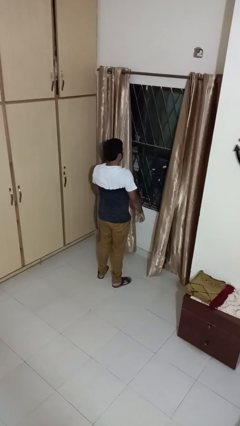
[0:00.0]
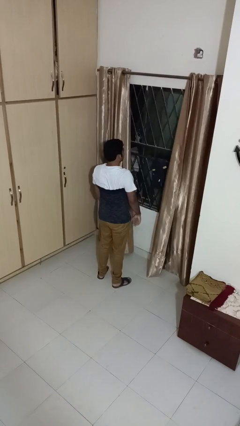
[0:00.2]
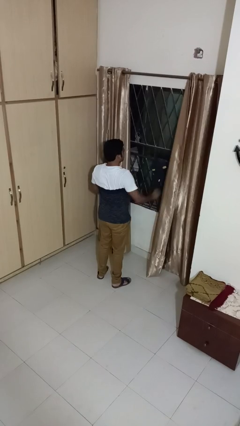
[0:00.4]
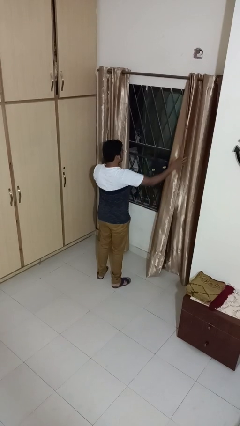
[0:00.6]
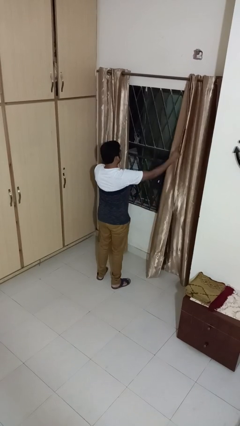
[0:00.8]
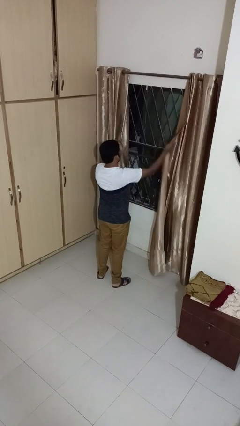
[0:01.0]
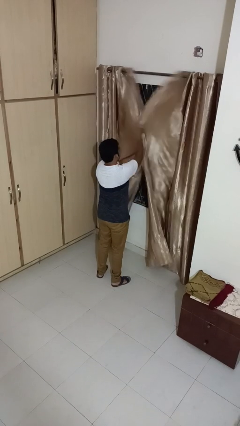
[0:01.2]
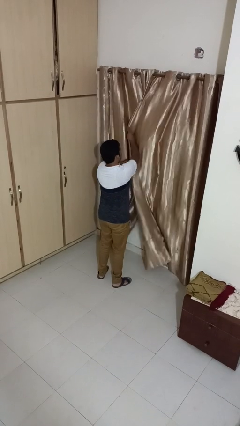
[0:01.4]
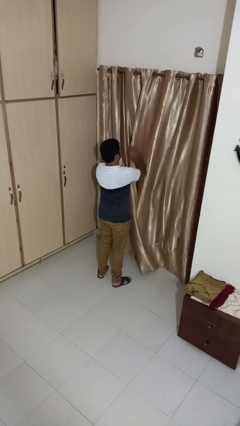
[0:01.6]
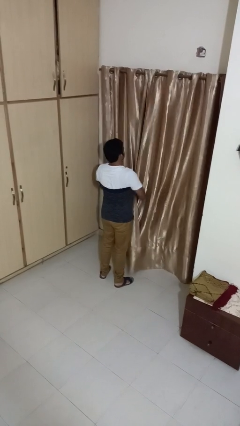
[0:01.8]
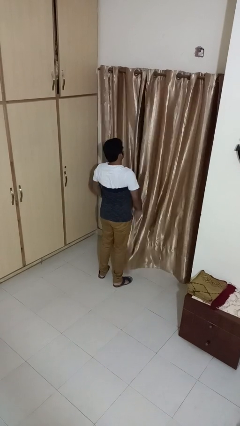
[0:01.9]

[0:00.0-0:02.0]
person closes curtains

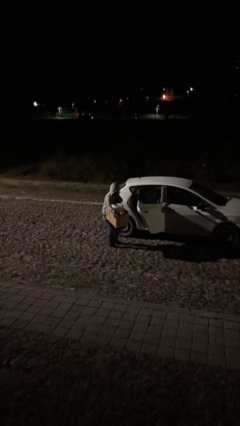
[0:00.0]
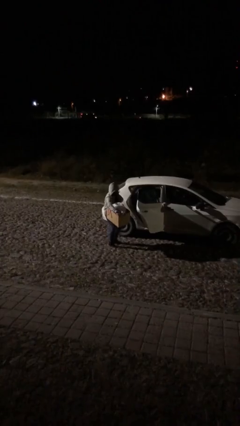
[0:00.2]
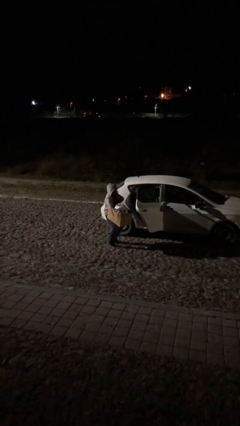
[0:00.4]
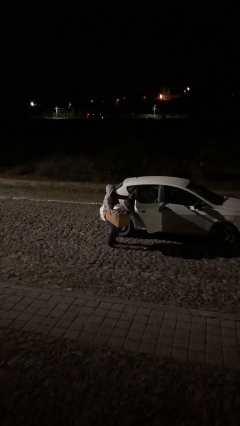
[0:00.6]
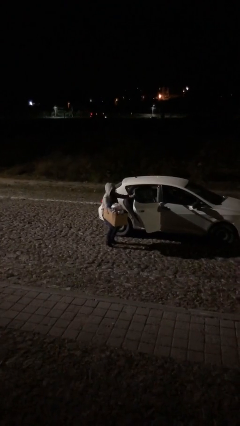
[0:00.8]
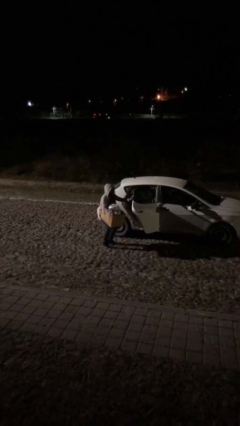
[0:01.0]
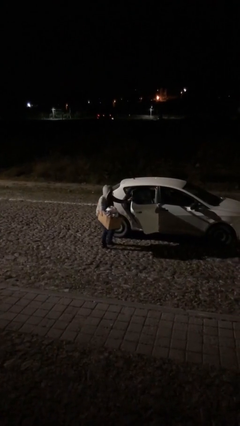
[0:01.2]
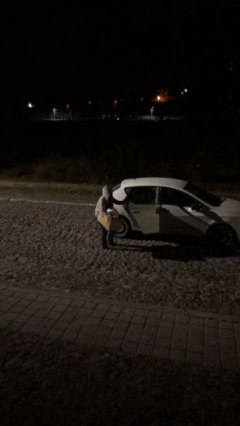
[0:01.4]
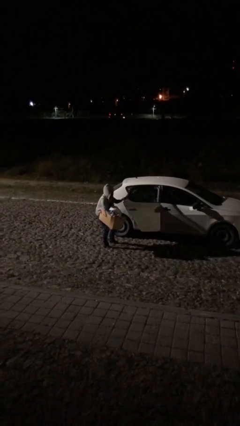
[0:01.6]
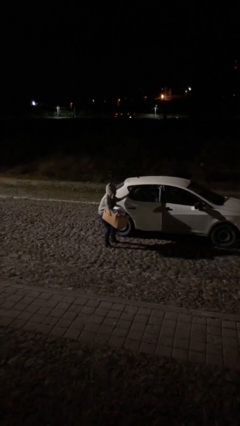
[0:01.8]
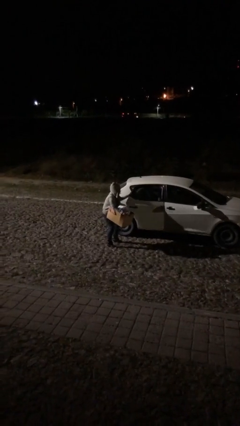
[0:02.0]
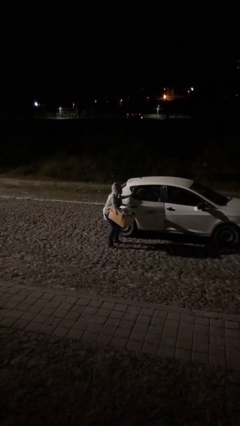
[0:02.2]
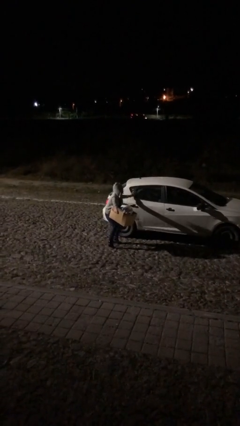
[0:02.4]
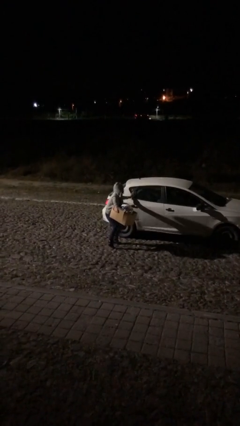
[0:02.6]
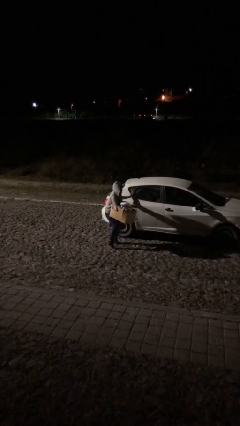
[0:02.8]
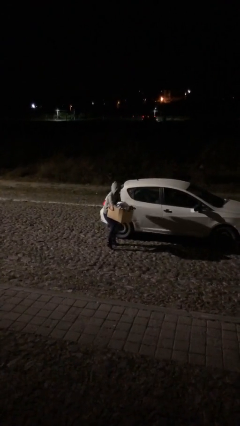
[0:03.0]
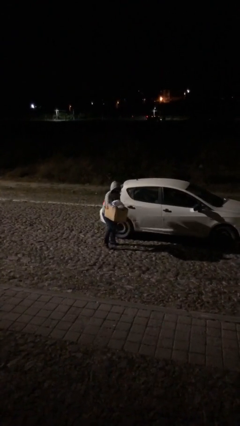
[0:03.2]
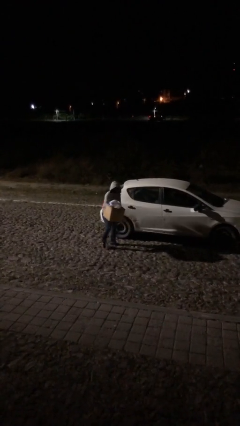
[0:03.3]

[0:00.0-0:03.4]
person closes car door

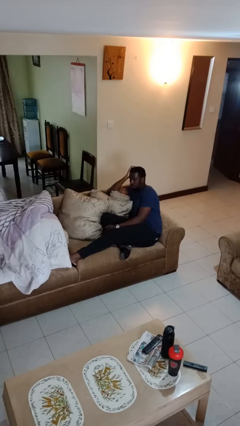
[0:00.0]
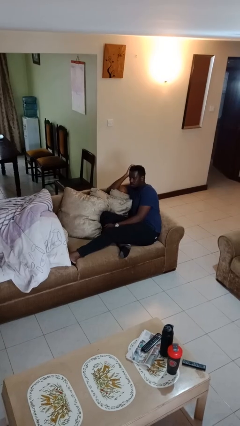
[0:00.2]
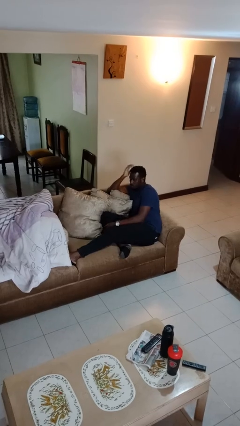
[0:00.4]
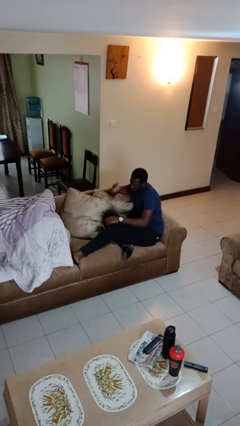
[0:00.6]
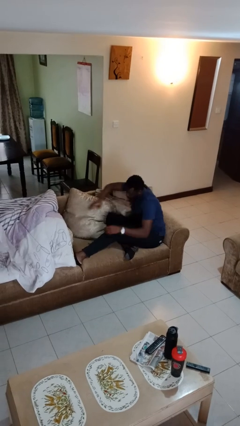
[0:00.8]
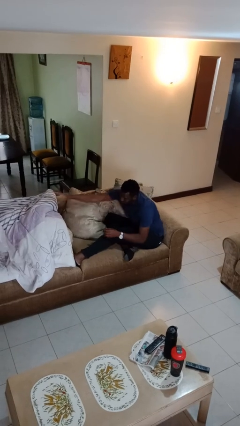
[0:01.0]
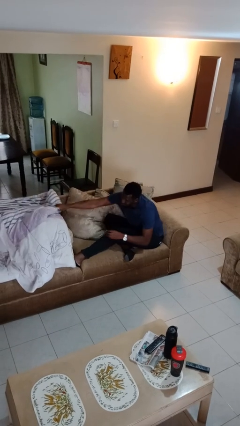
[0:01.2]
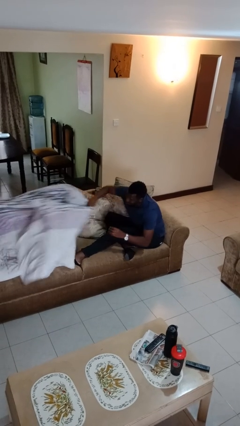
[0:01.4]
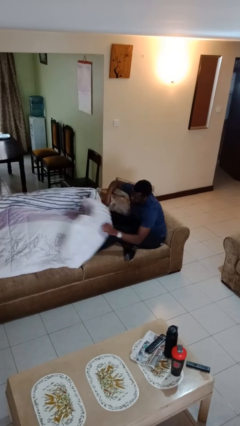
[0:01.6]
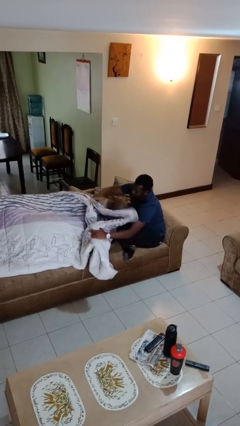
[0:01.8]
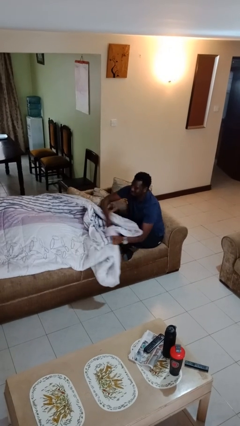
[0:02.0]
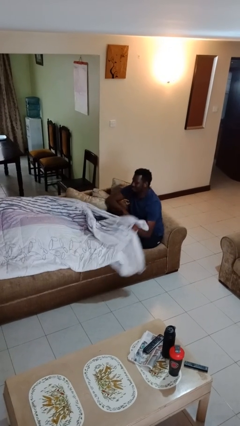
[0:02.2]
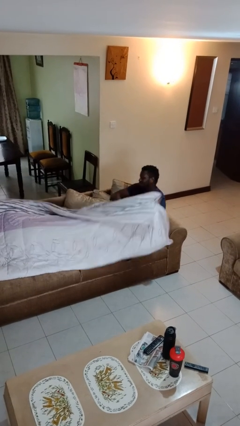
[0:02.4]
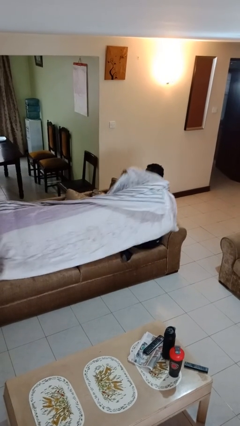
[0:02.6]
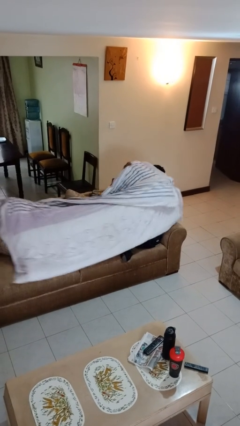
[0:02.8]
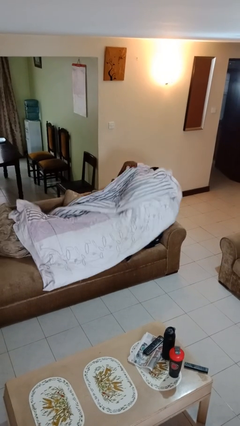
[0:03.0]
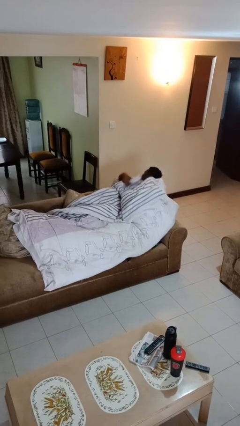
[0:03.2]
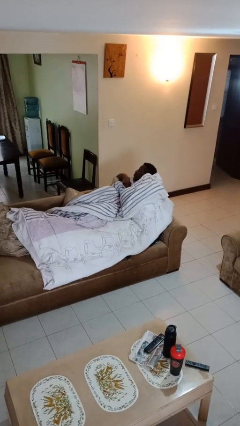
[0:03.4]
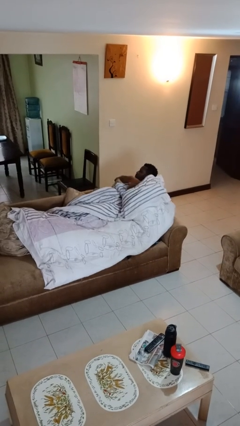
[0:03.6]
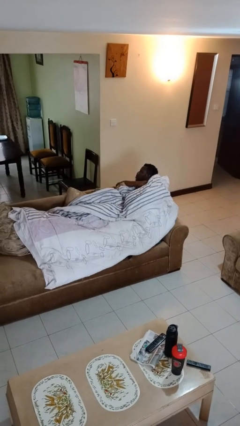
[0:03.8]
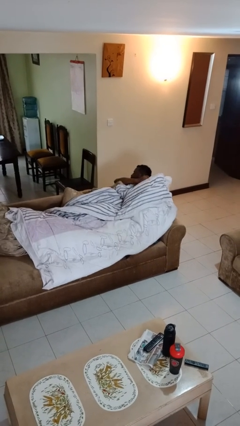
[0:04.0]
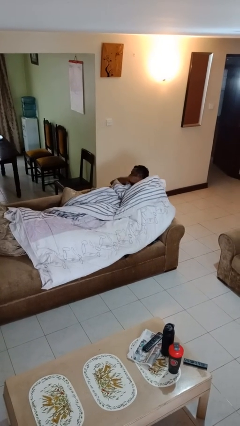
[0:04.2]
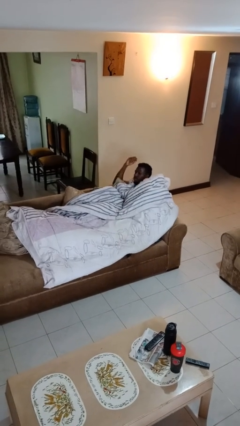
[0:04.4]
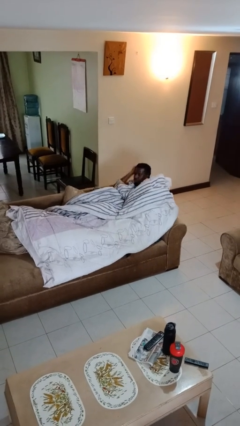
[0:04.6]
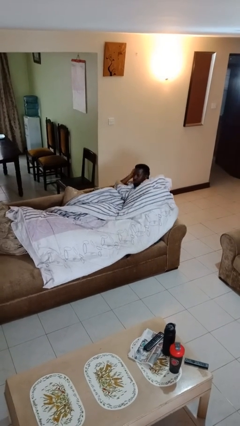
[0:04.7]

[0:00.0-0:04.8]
person covers with blanket

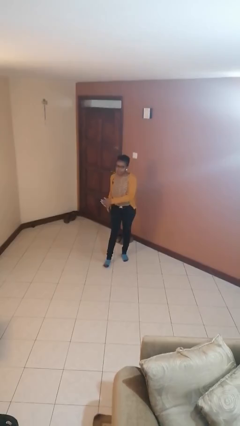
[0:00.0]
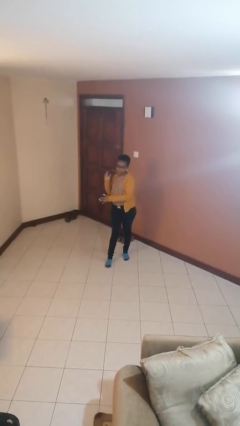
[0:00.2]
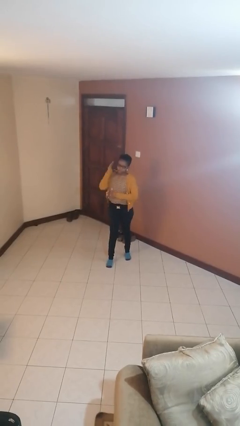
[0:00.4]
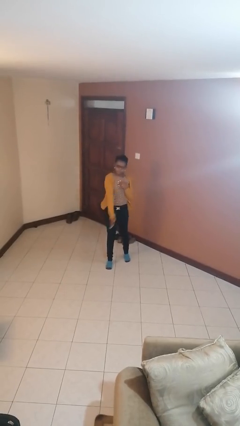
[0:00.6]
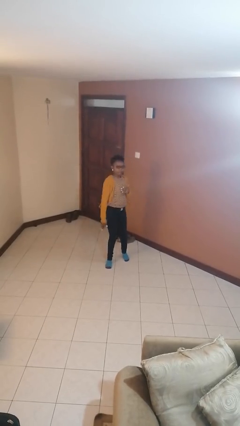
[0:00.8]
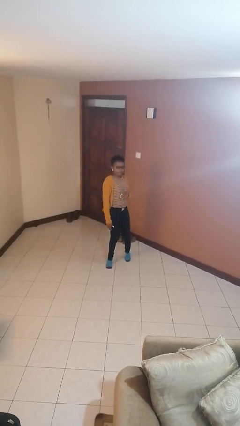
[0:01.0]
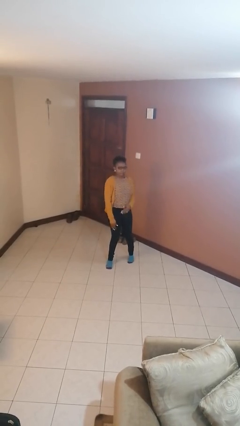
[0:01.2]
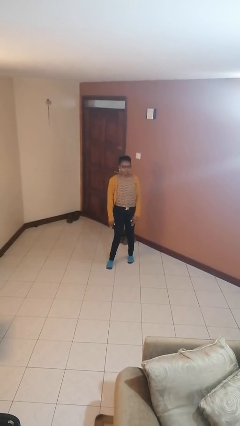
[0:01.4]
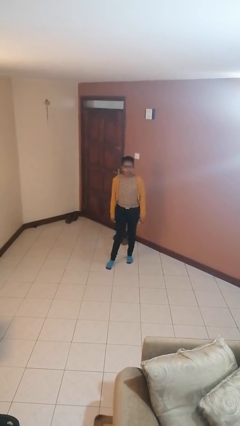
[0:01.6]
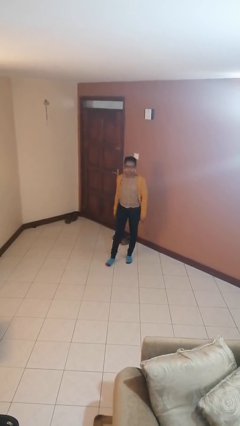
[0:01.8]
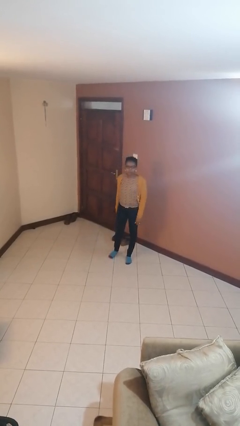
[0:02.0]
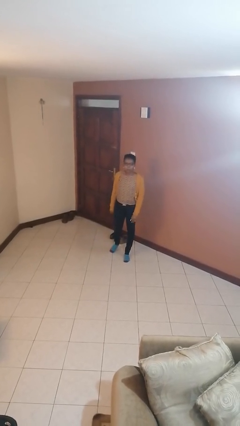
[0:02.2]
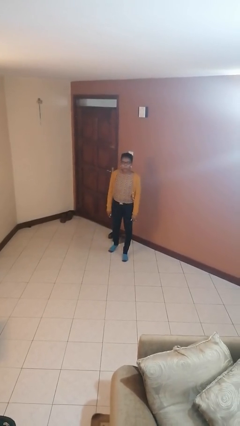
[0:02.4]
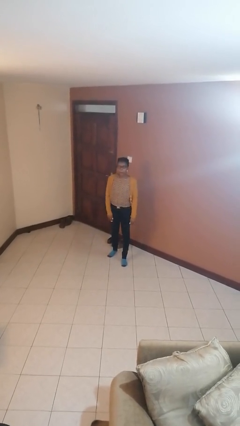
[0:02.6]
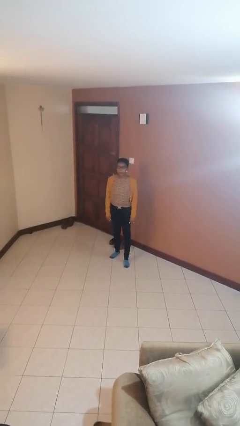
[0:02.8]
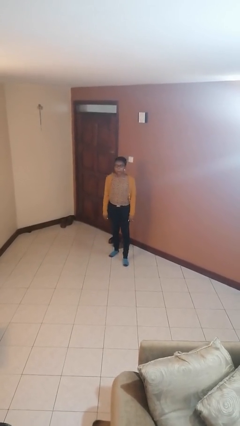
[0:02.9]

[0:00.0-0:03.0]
person karate chop

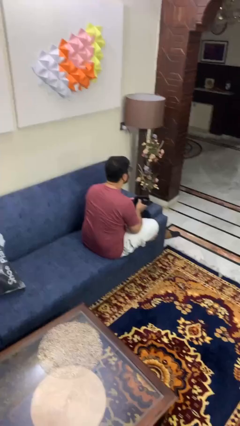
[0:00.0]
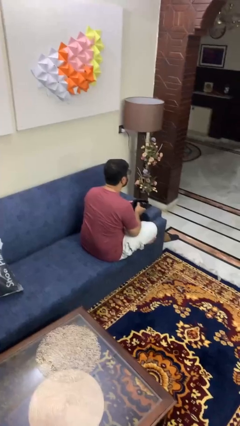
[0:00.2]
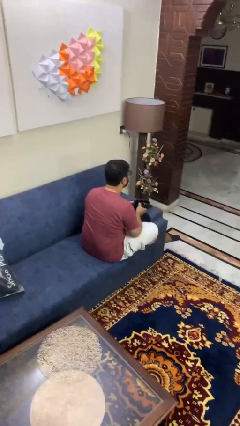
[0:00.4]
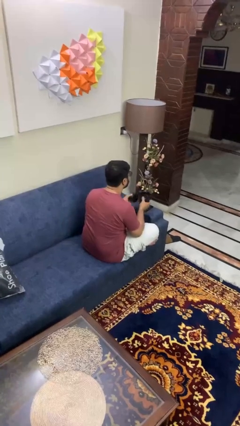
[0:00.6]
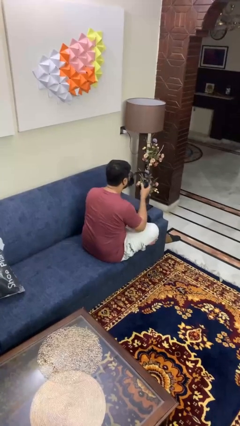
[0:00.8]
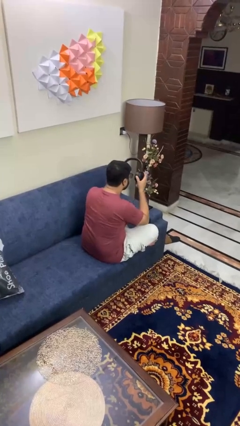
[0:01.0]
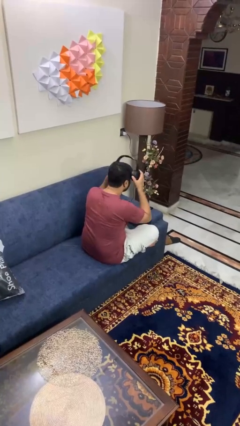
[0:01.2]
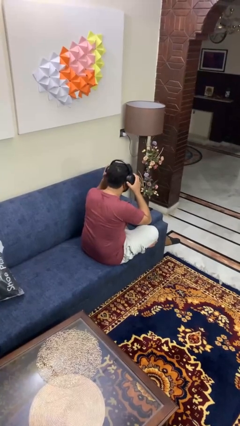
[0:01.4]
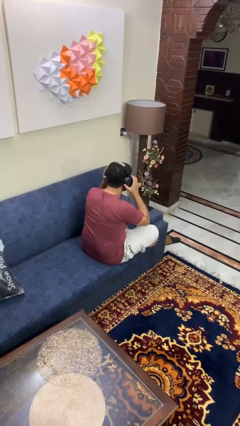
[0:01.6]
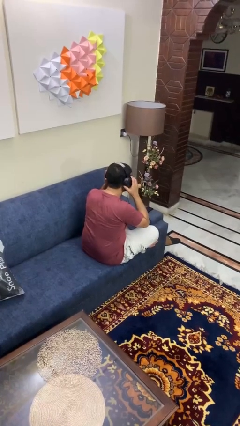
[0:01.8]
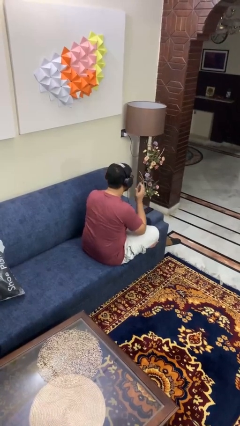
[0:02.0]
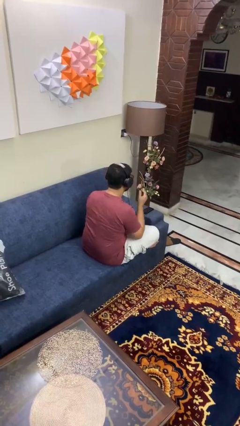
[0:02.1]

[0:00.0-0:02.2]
person puts on headphones

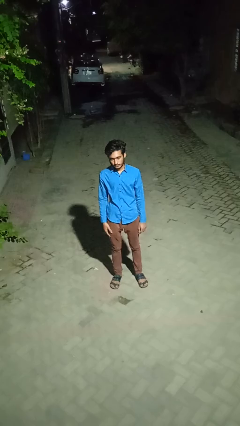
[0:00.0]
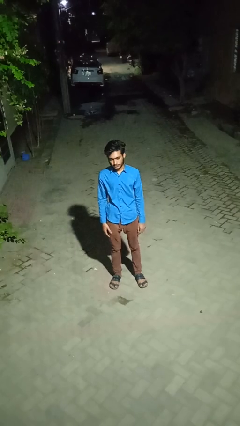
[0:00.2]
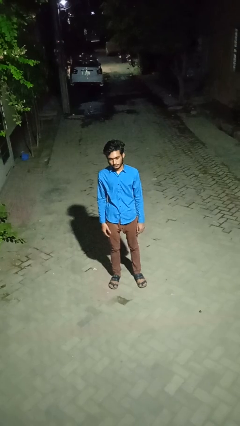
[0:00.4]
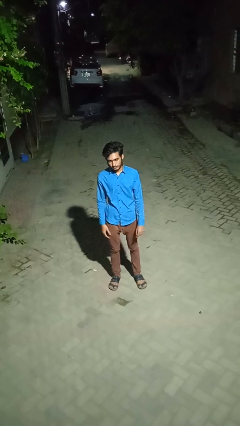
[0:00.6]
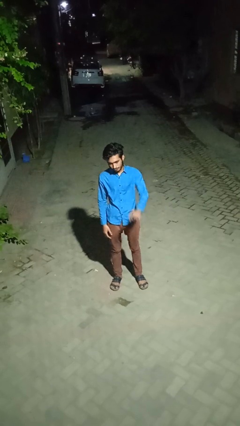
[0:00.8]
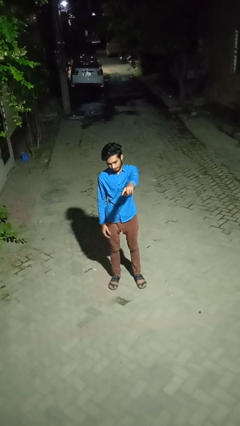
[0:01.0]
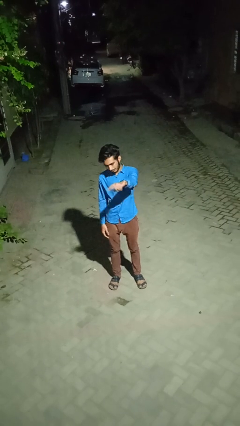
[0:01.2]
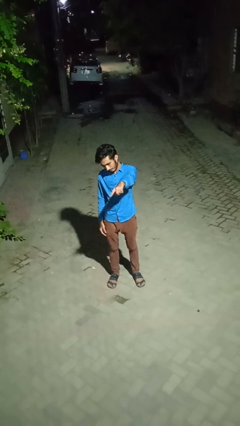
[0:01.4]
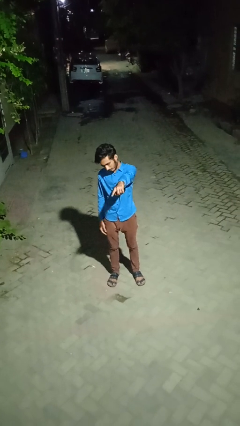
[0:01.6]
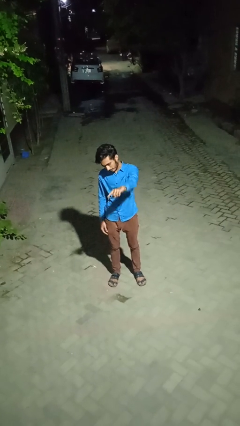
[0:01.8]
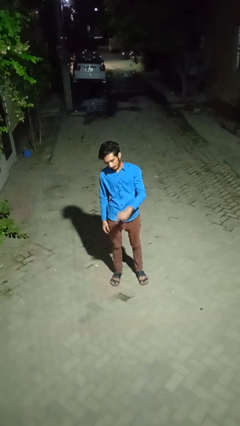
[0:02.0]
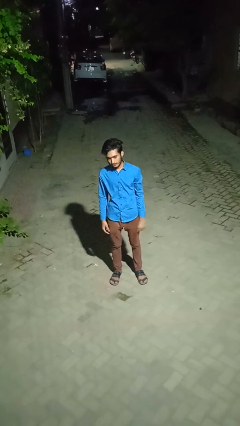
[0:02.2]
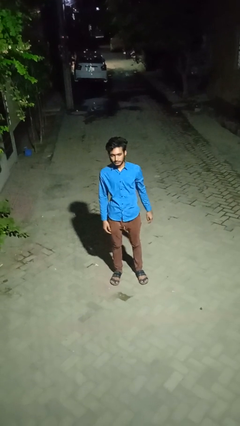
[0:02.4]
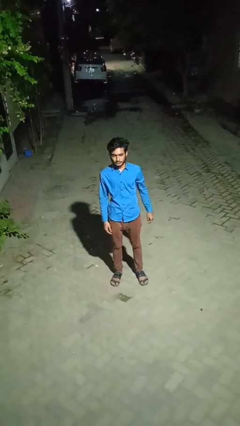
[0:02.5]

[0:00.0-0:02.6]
person points at person
